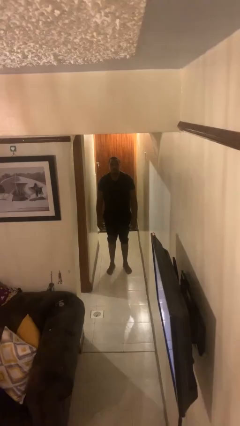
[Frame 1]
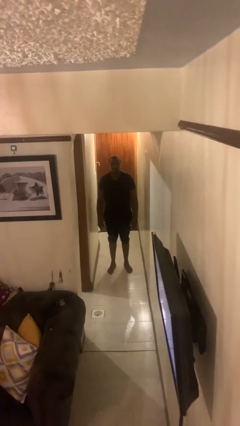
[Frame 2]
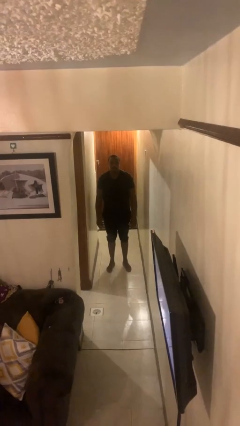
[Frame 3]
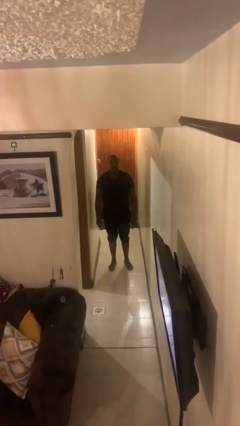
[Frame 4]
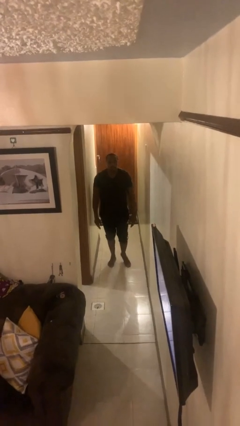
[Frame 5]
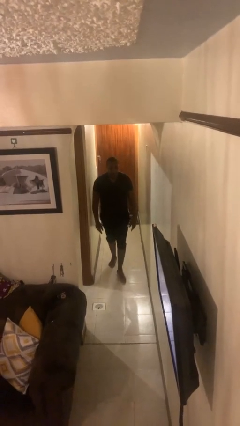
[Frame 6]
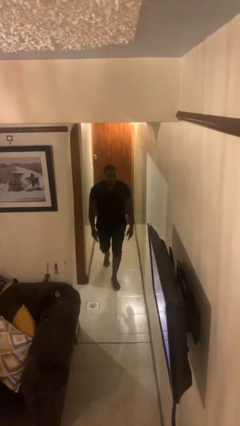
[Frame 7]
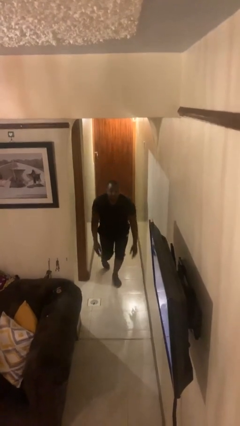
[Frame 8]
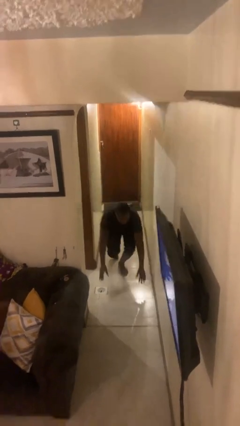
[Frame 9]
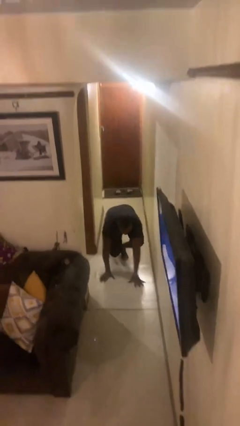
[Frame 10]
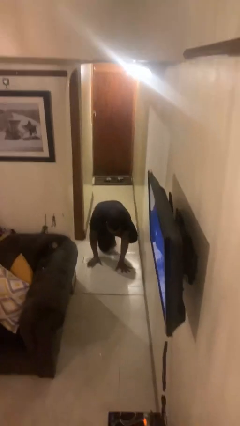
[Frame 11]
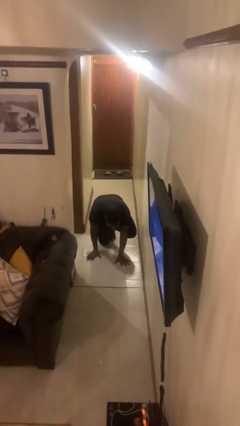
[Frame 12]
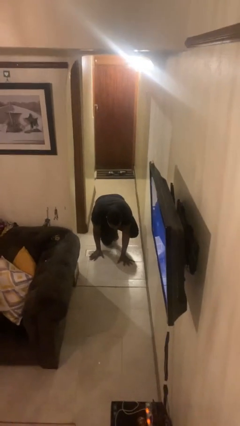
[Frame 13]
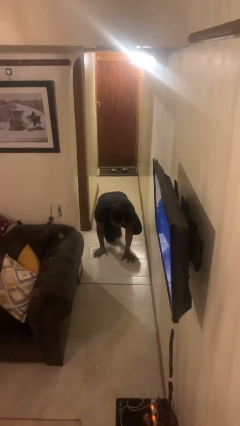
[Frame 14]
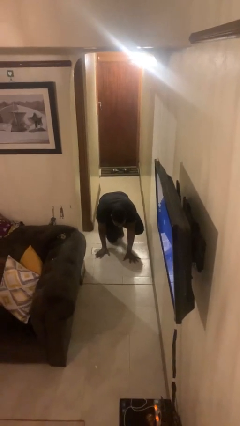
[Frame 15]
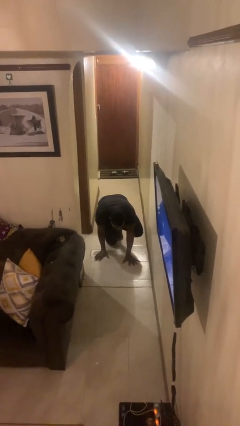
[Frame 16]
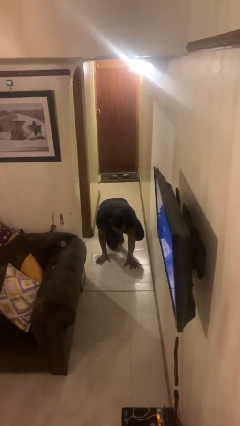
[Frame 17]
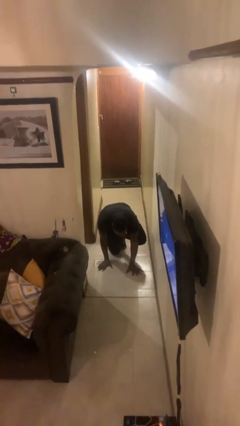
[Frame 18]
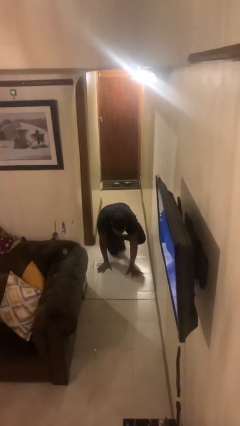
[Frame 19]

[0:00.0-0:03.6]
person trips on object on floor

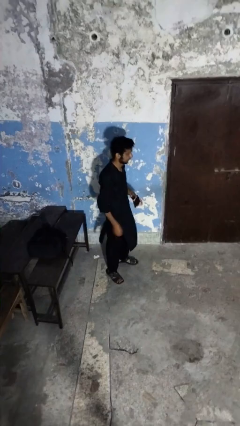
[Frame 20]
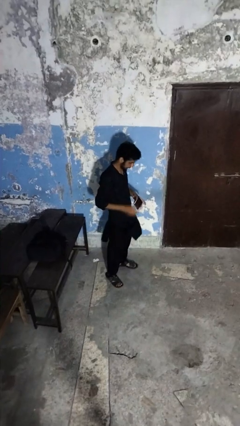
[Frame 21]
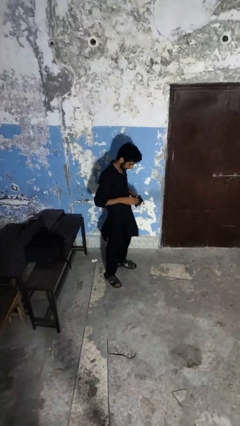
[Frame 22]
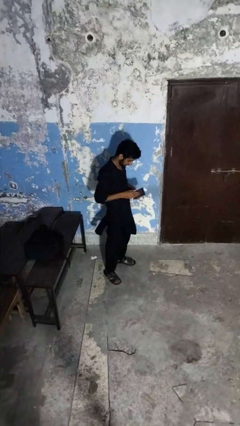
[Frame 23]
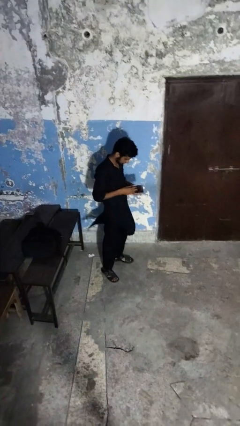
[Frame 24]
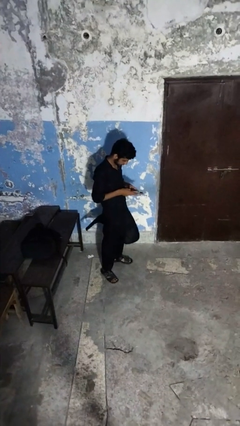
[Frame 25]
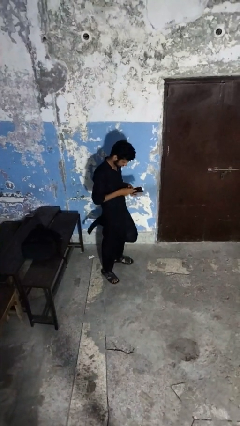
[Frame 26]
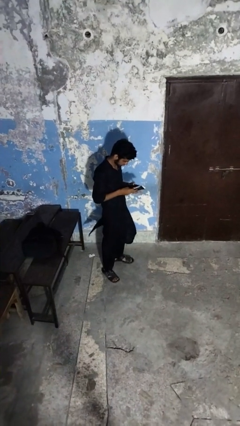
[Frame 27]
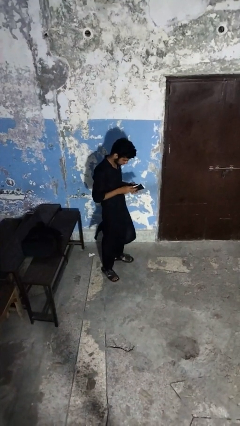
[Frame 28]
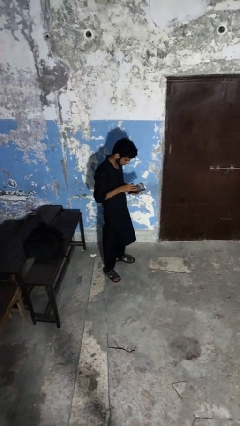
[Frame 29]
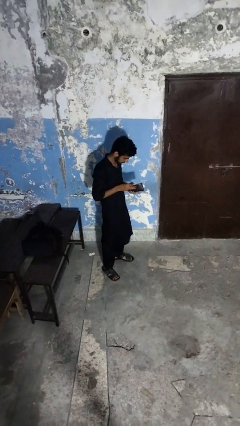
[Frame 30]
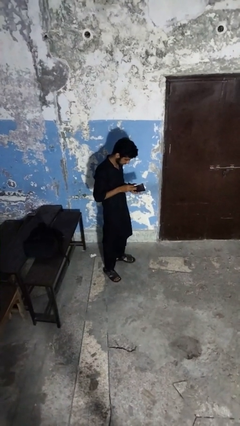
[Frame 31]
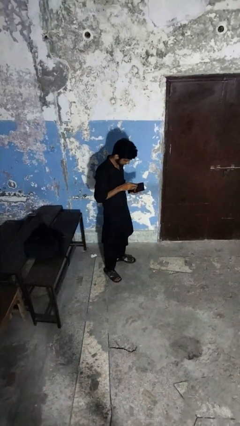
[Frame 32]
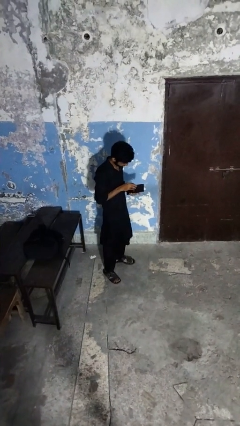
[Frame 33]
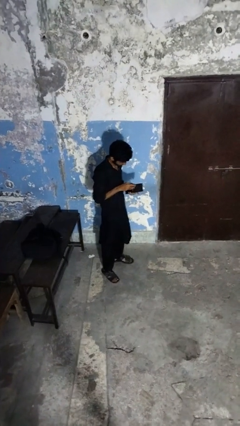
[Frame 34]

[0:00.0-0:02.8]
person searches in purse

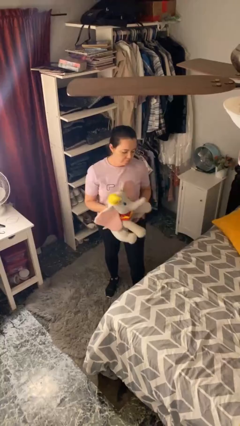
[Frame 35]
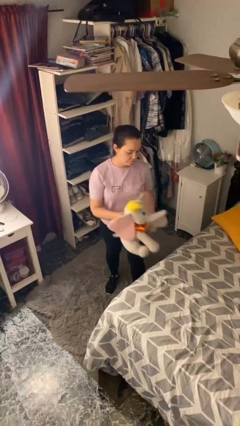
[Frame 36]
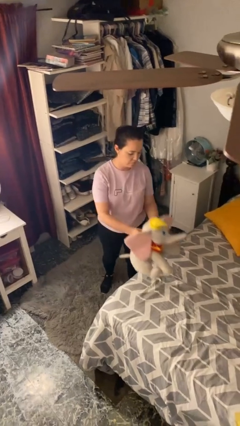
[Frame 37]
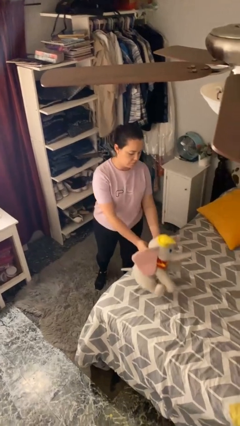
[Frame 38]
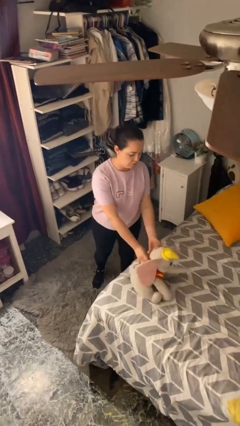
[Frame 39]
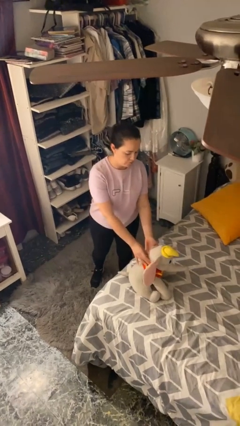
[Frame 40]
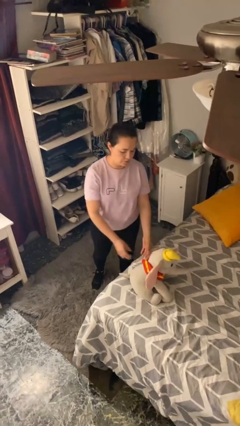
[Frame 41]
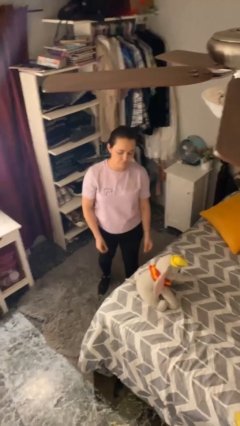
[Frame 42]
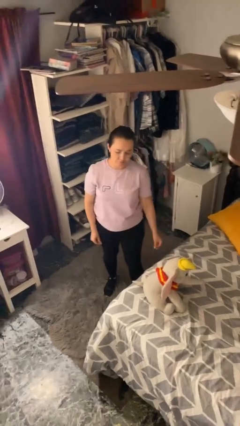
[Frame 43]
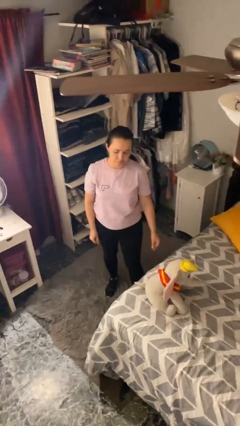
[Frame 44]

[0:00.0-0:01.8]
person puts down object on bed

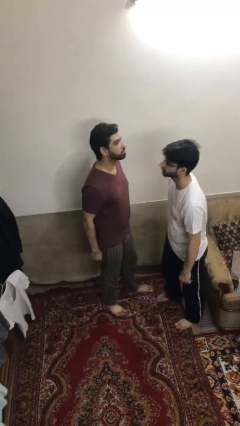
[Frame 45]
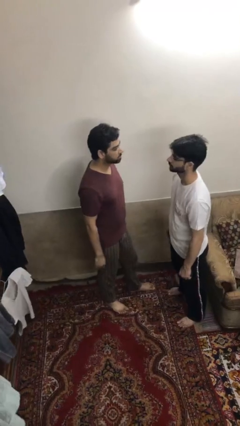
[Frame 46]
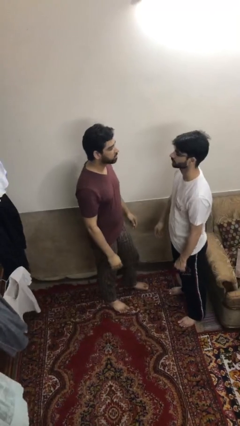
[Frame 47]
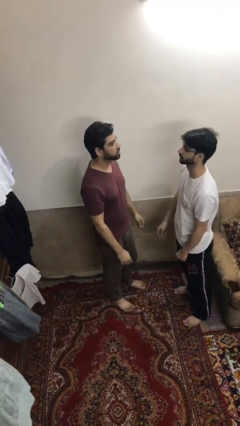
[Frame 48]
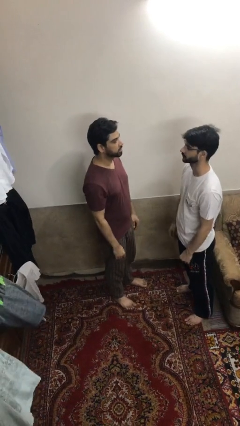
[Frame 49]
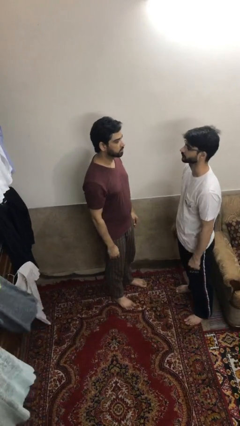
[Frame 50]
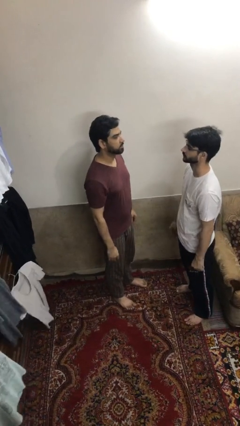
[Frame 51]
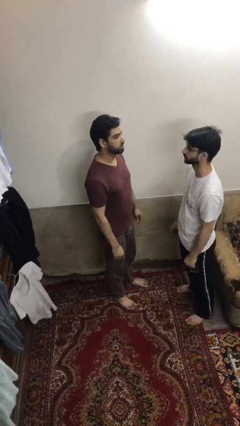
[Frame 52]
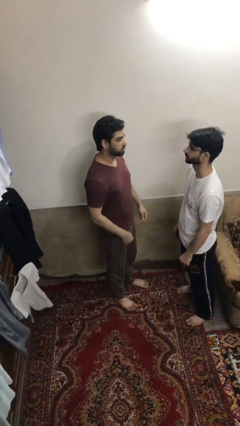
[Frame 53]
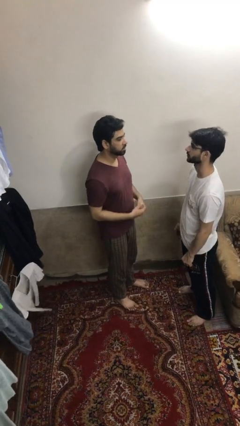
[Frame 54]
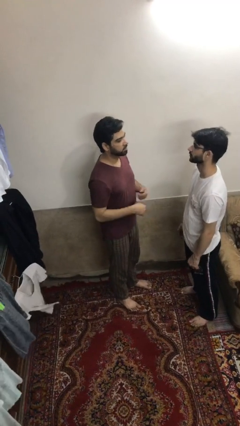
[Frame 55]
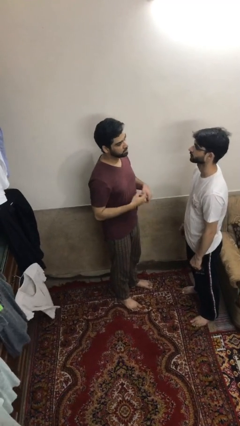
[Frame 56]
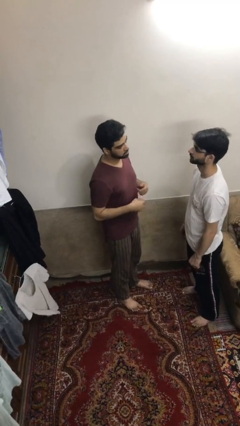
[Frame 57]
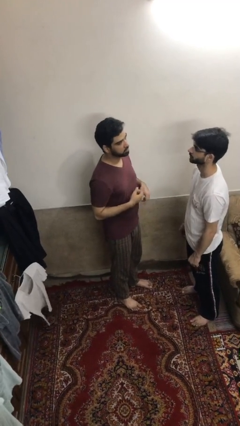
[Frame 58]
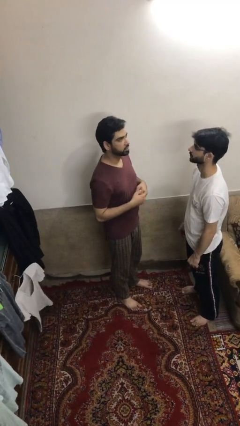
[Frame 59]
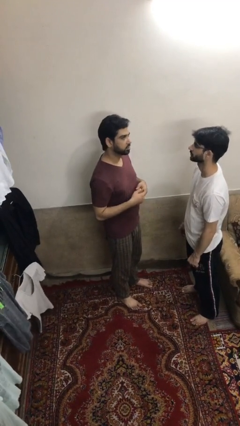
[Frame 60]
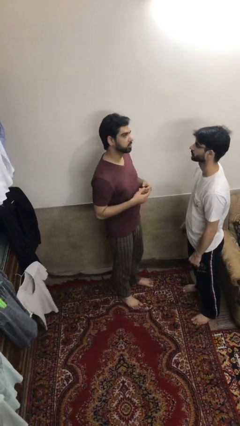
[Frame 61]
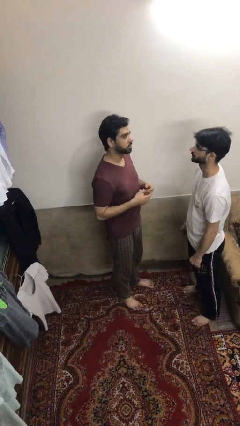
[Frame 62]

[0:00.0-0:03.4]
person talks to person

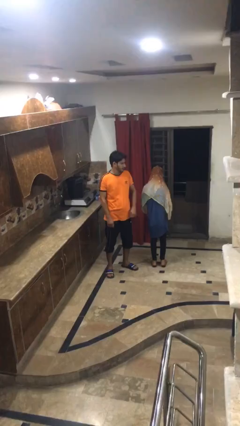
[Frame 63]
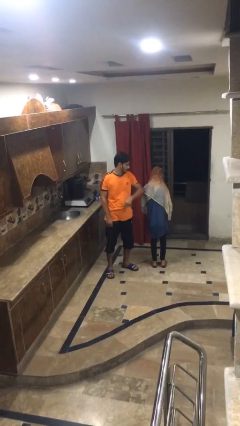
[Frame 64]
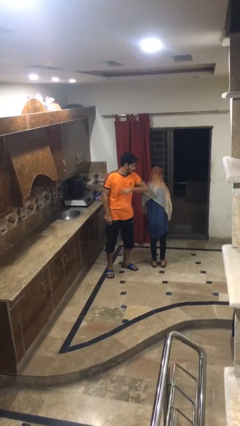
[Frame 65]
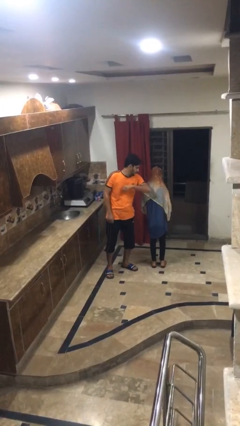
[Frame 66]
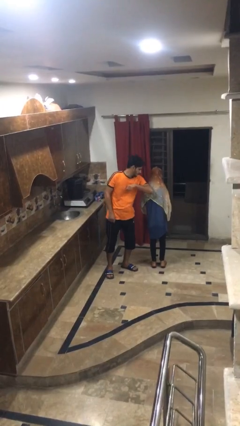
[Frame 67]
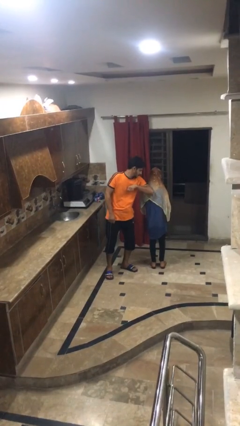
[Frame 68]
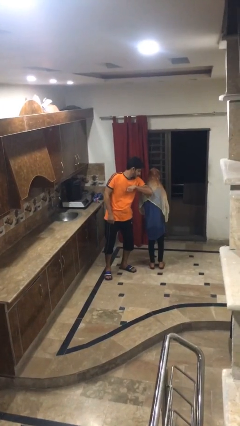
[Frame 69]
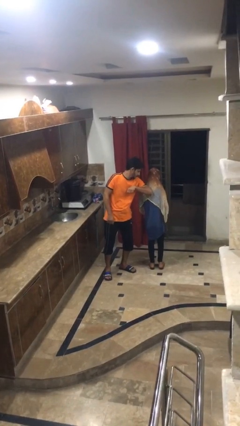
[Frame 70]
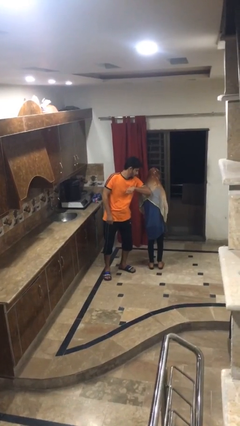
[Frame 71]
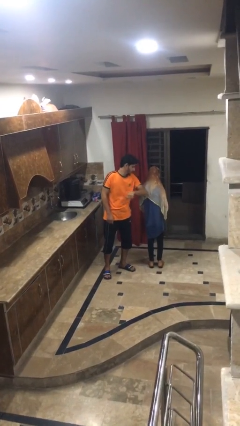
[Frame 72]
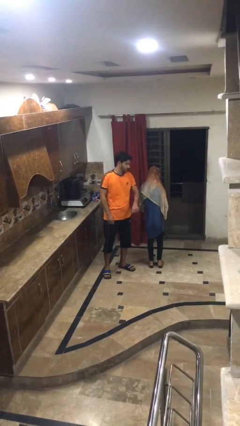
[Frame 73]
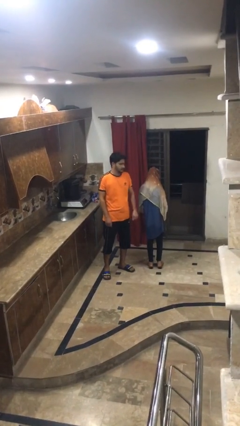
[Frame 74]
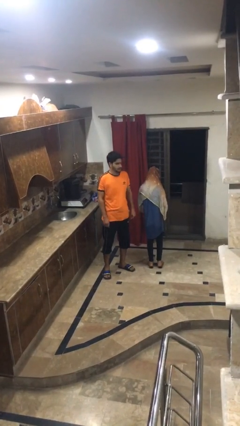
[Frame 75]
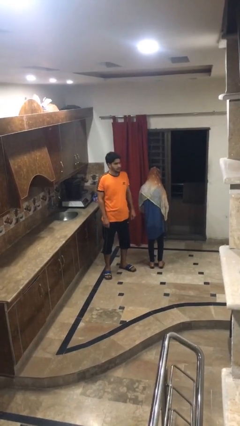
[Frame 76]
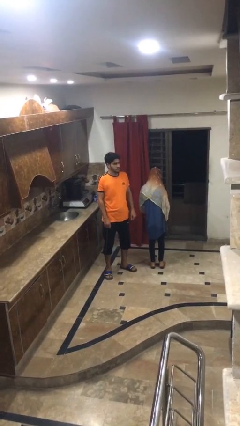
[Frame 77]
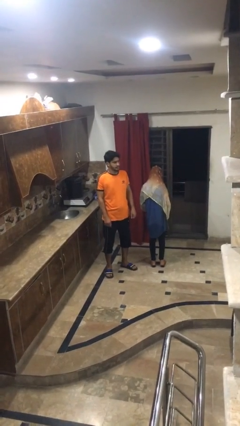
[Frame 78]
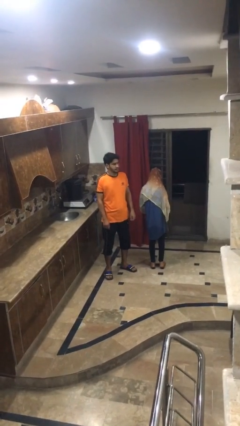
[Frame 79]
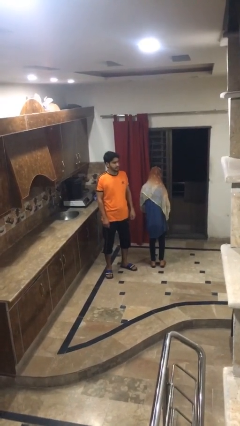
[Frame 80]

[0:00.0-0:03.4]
person nudges person with elbow

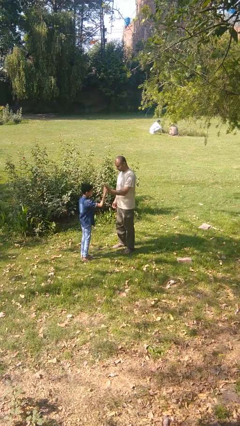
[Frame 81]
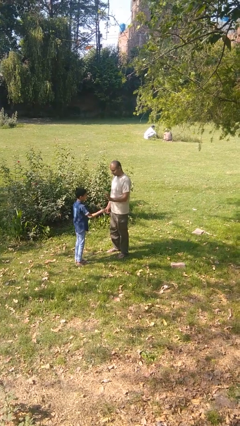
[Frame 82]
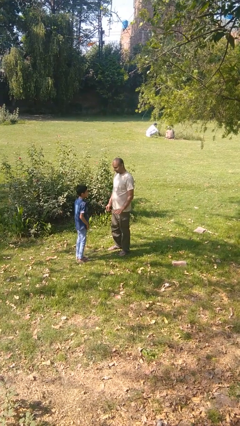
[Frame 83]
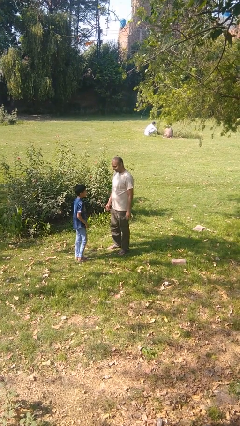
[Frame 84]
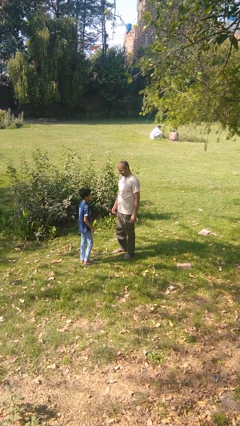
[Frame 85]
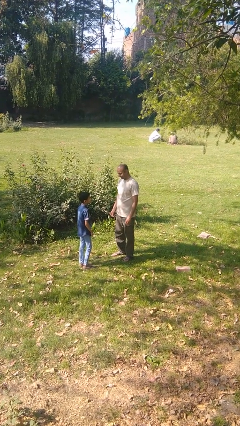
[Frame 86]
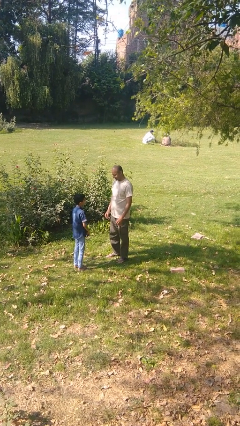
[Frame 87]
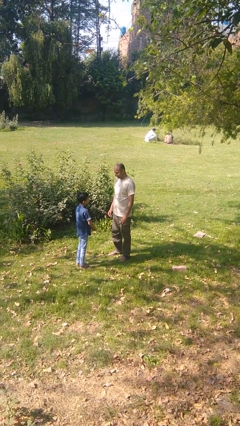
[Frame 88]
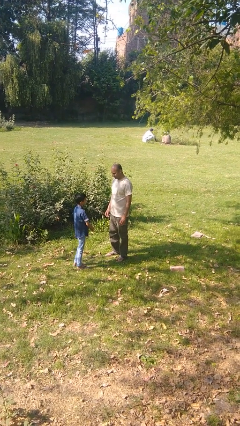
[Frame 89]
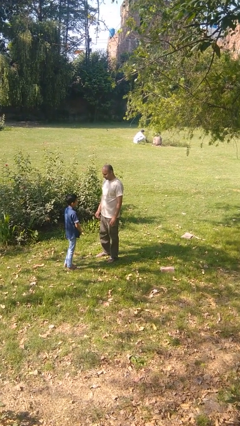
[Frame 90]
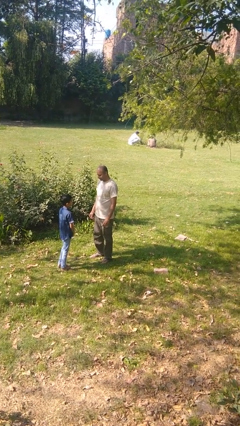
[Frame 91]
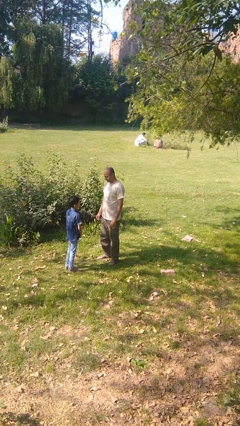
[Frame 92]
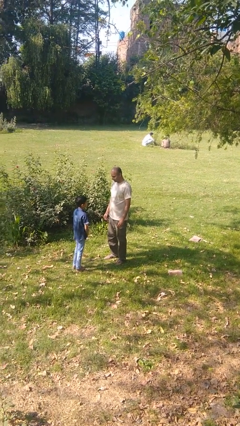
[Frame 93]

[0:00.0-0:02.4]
person highfives hand
